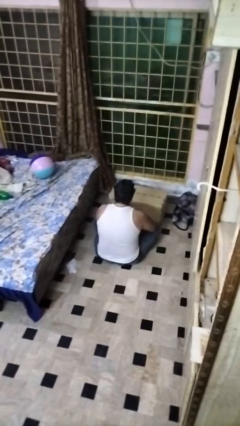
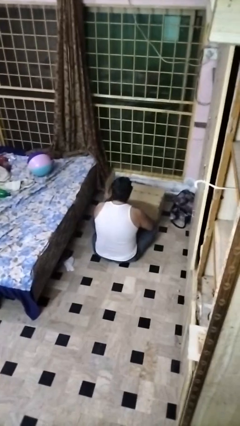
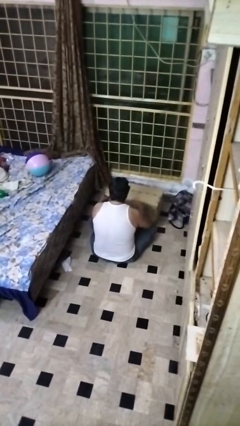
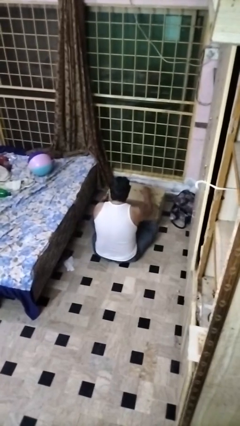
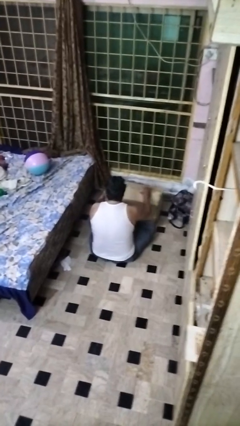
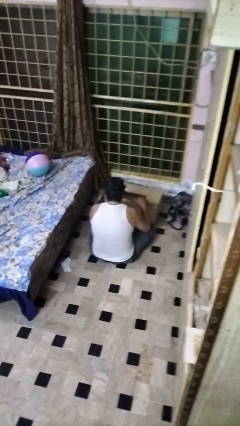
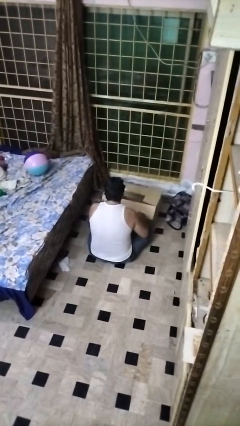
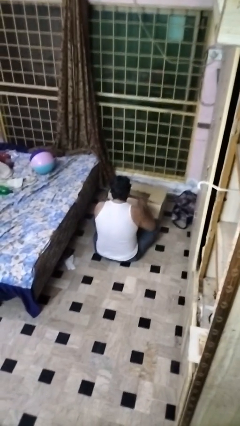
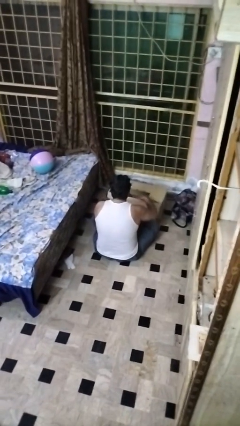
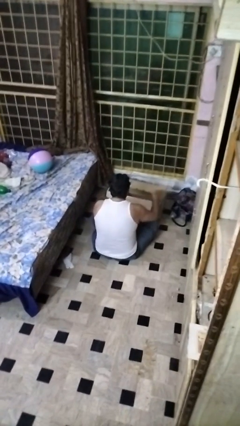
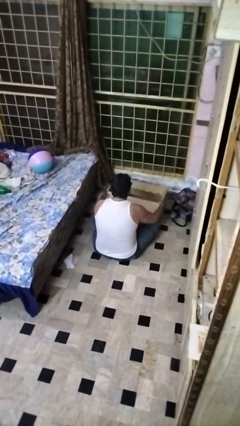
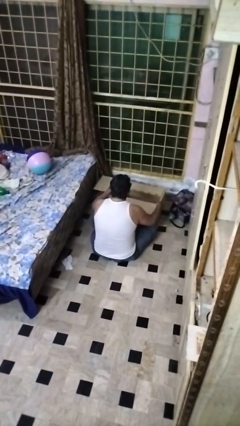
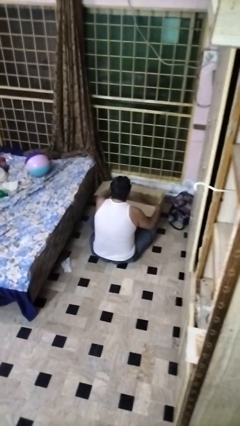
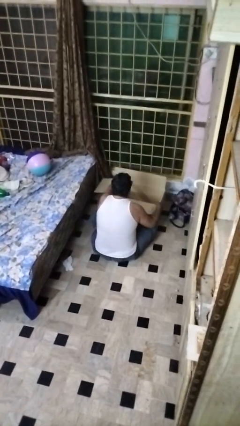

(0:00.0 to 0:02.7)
person opens box

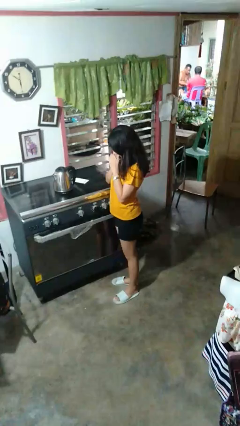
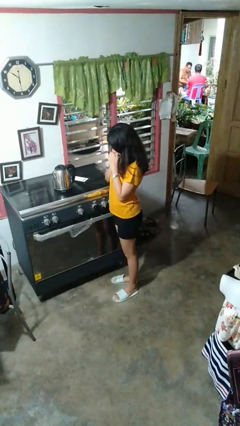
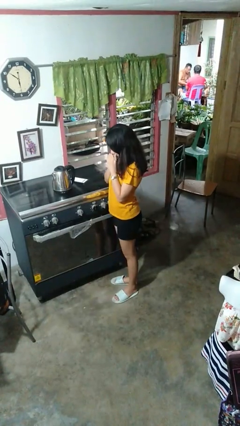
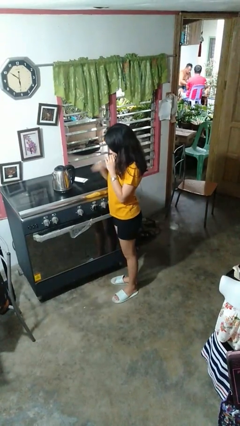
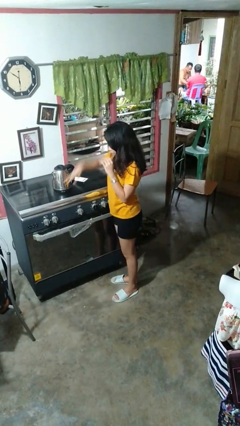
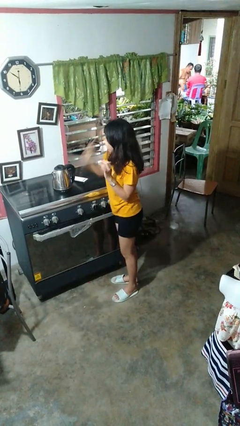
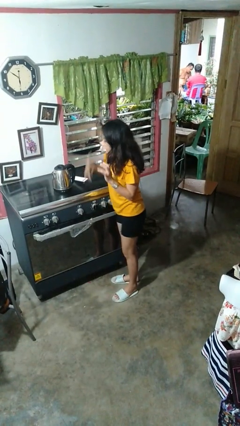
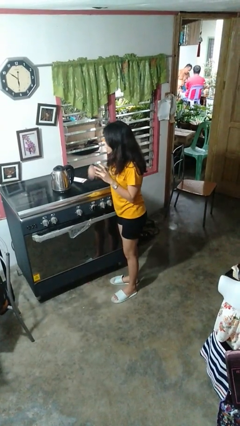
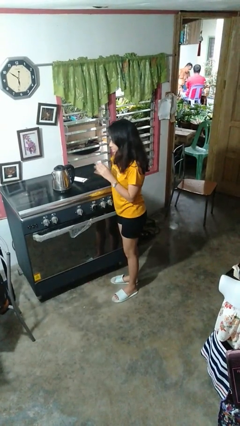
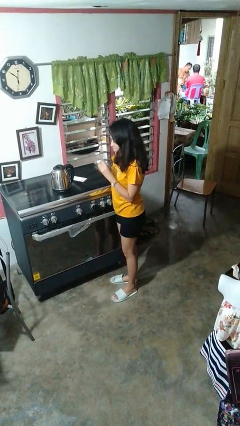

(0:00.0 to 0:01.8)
person burns hand

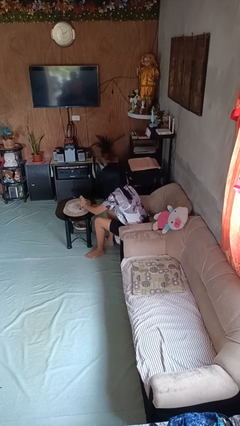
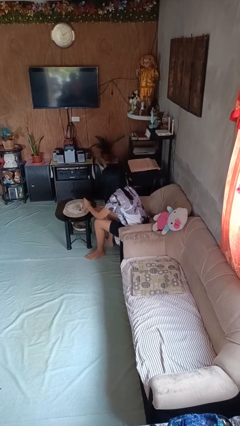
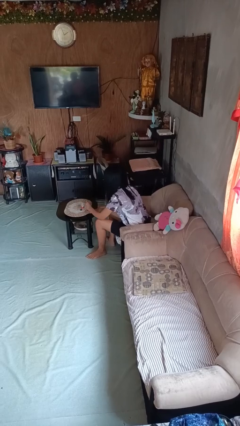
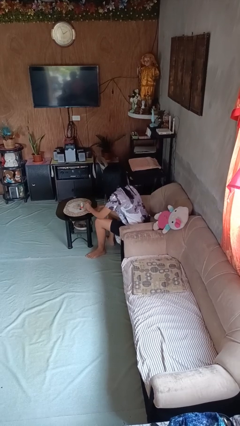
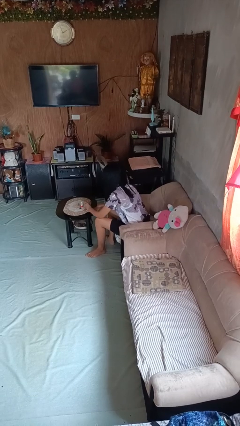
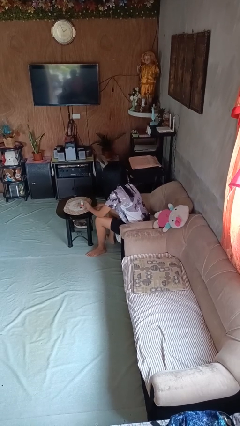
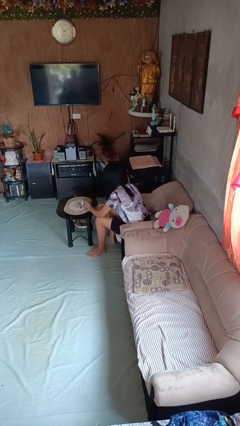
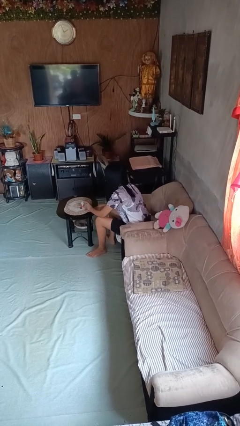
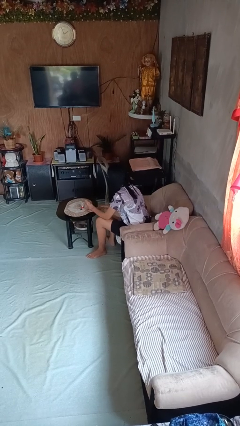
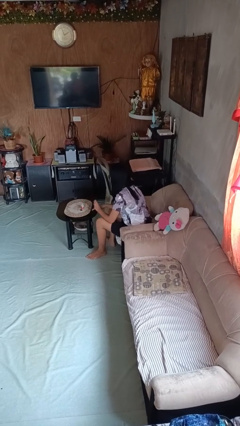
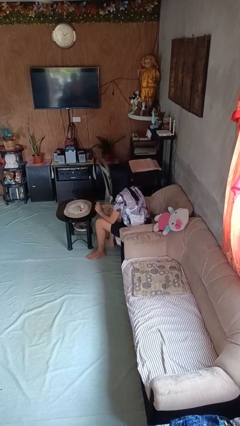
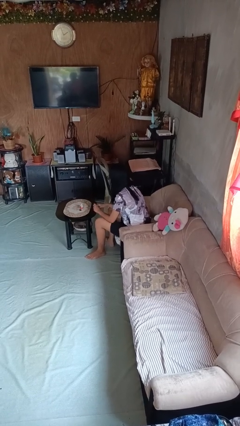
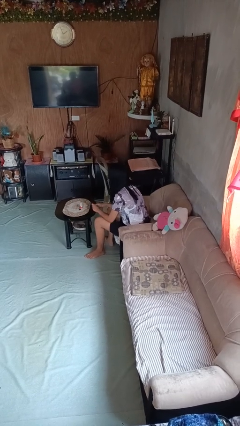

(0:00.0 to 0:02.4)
person paints fingernails

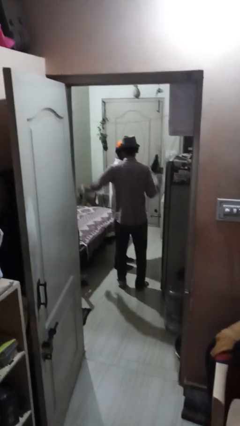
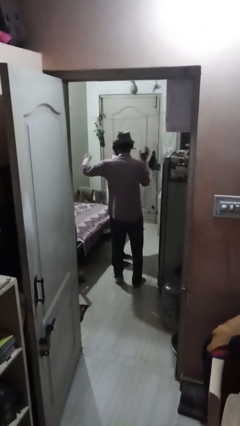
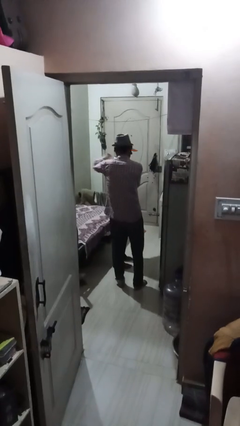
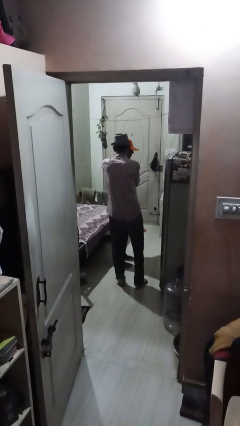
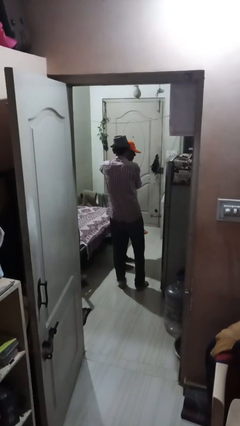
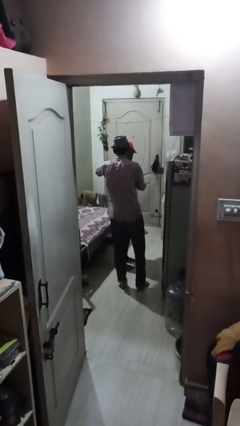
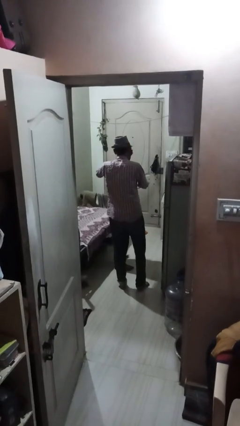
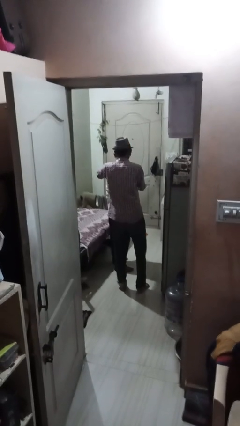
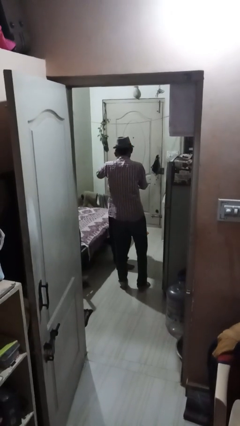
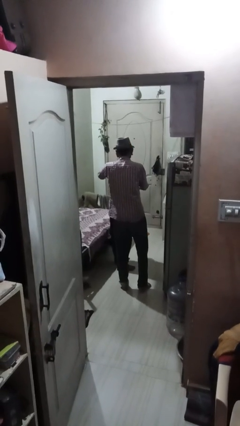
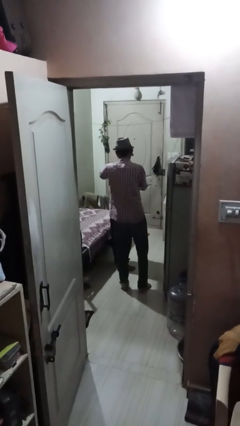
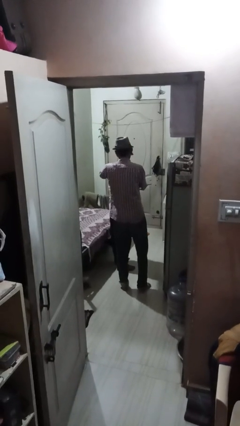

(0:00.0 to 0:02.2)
person pounds shoulders of person

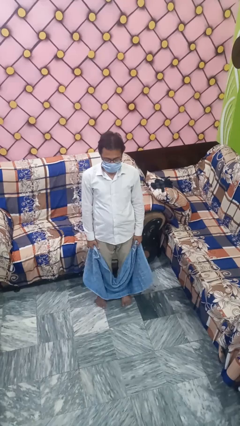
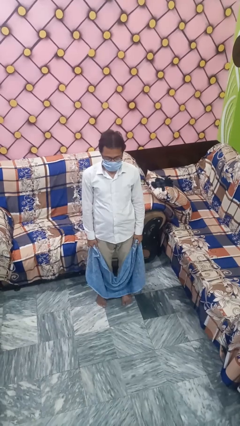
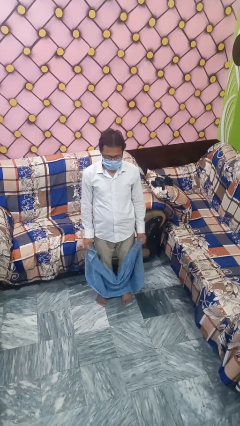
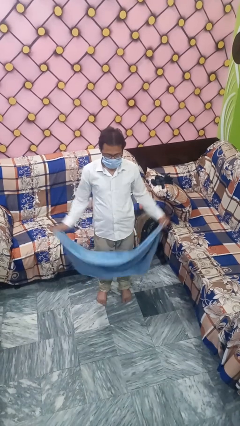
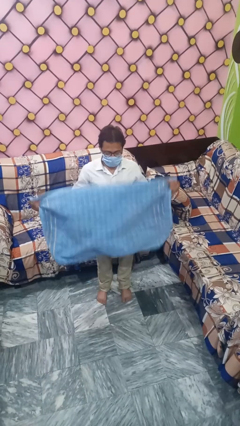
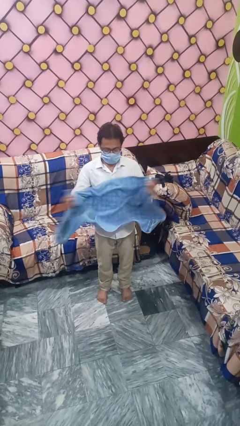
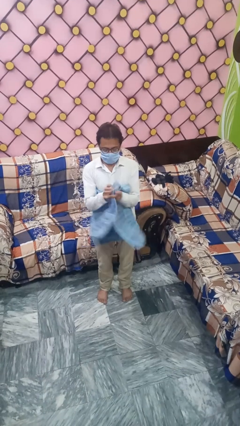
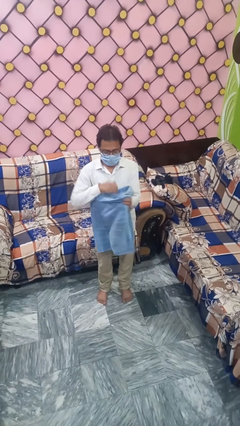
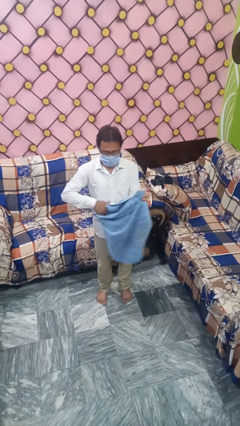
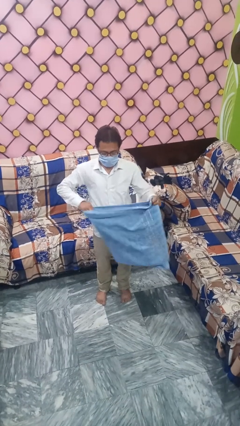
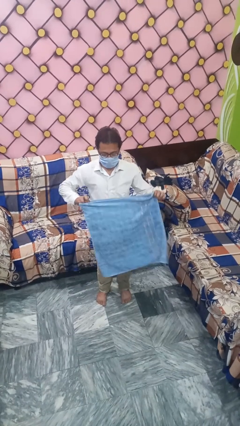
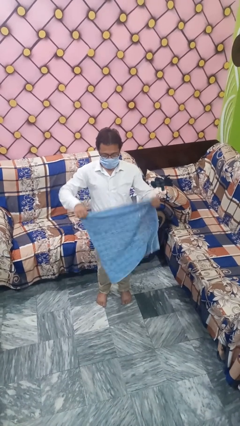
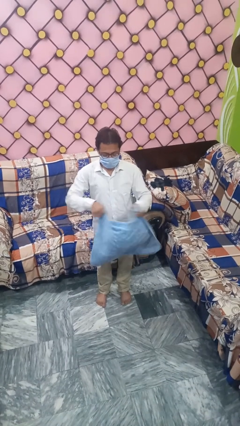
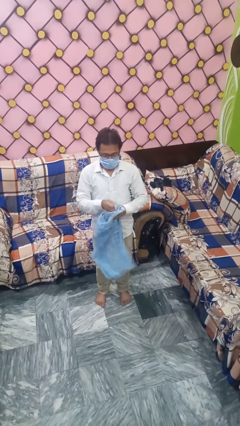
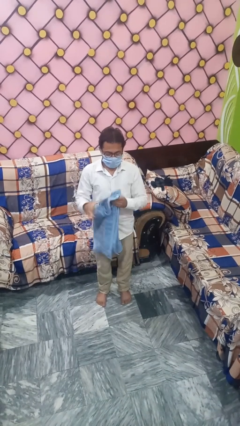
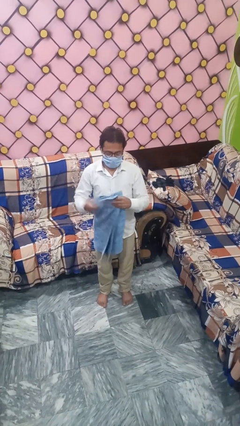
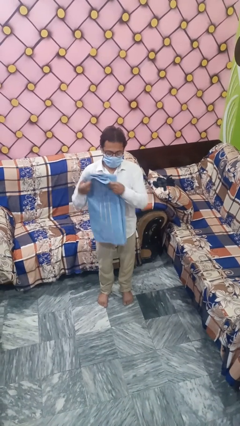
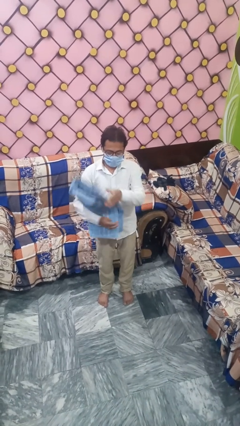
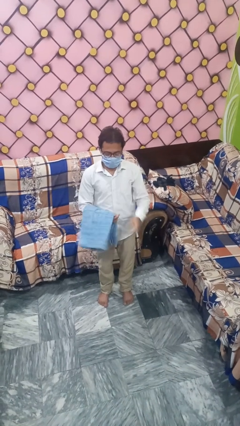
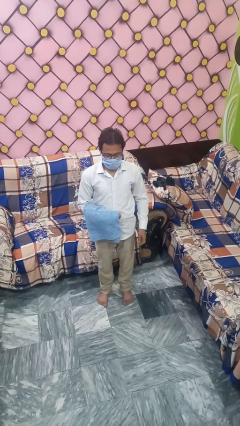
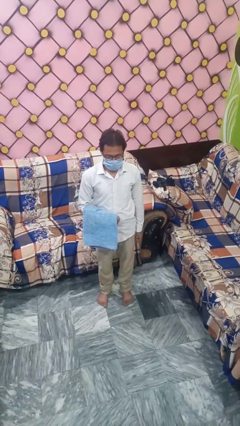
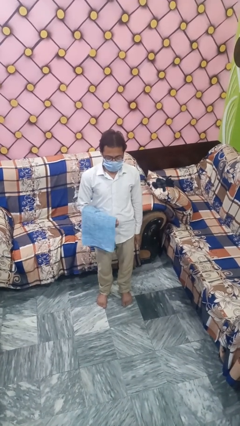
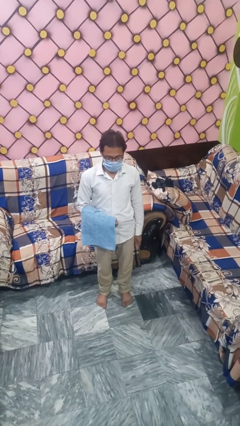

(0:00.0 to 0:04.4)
person folds towel

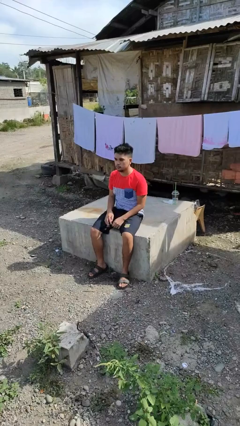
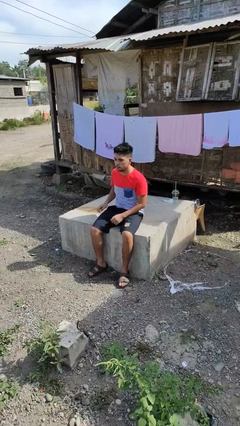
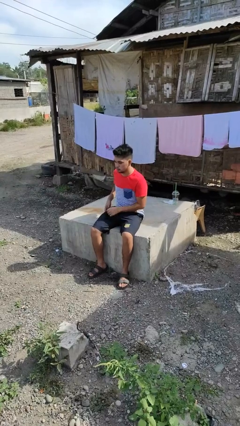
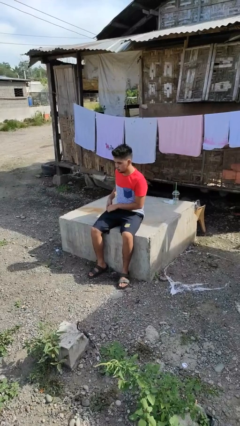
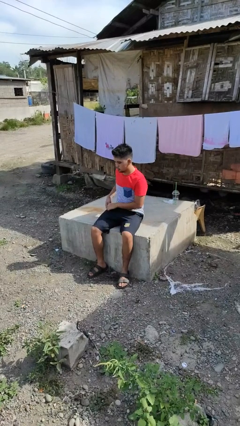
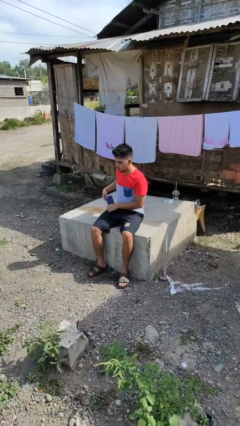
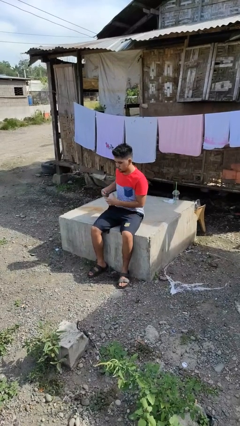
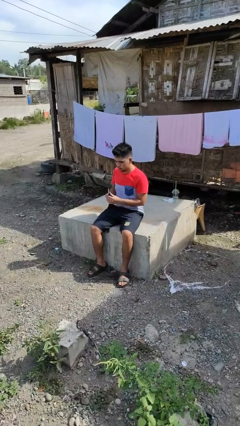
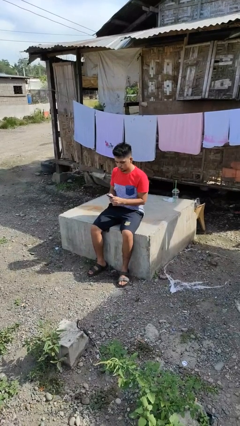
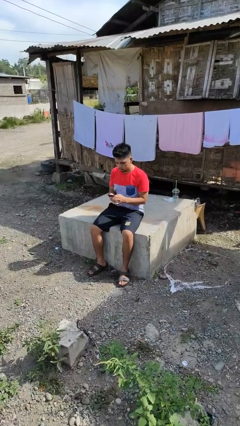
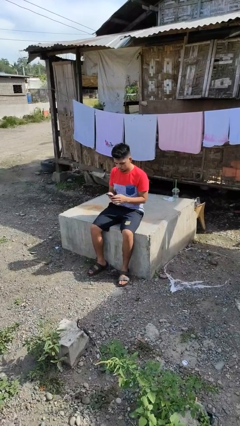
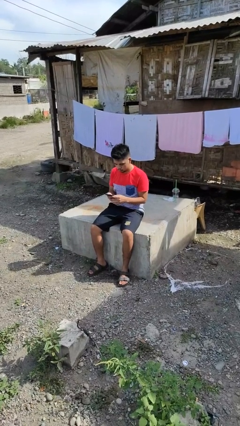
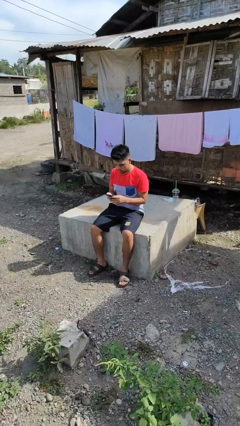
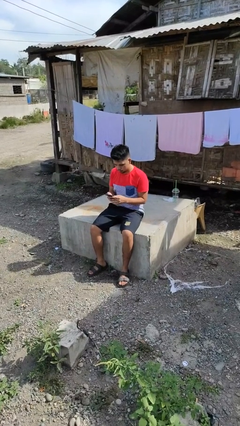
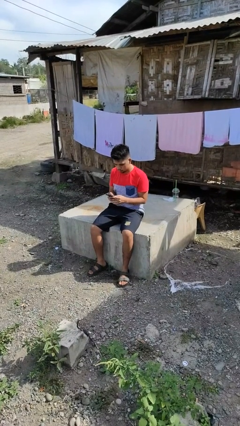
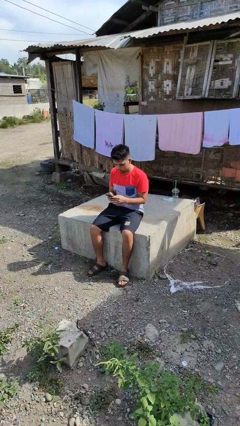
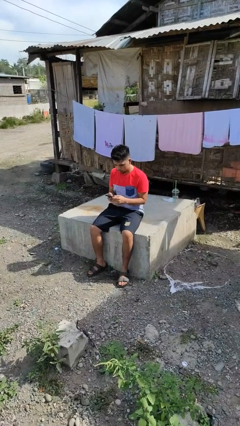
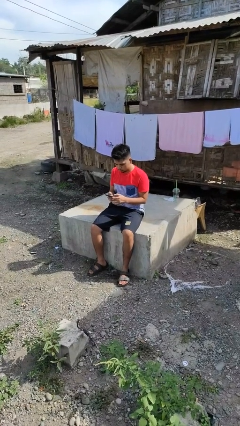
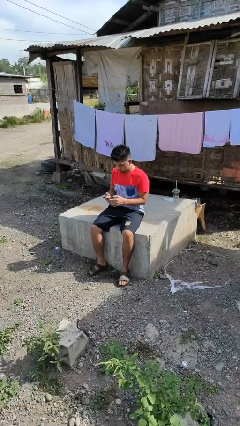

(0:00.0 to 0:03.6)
person takes phone from pocket

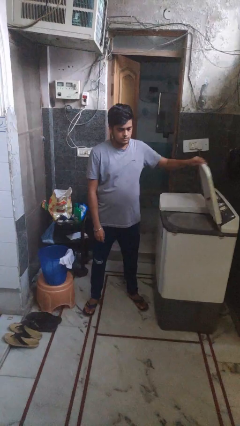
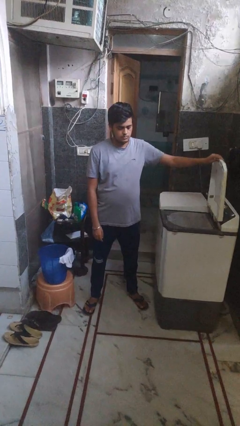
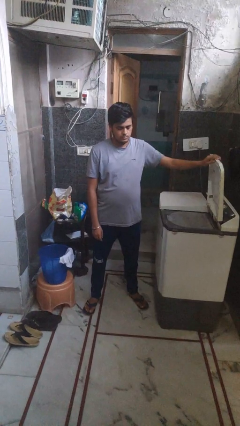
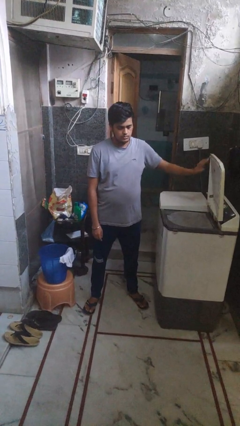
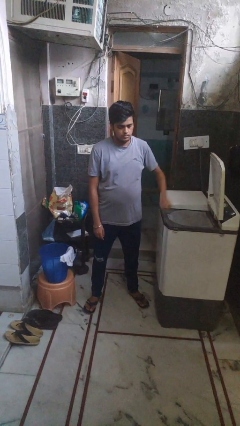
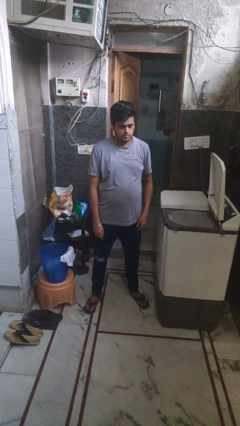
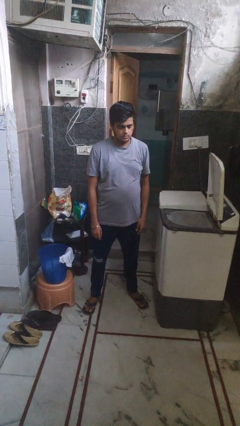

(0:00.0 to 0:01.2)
person opens clothes washer
